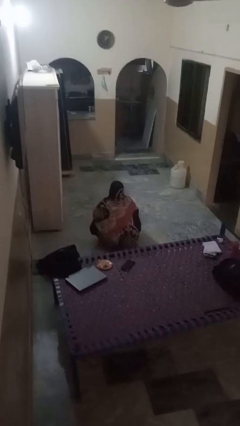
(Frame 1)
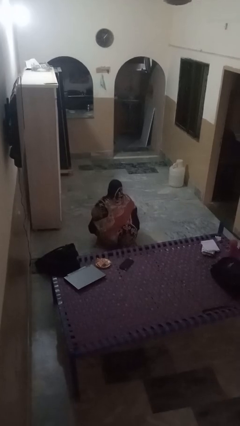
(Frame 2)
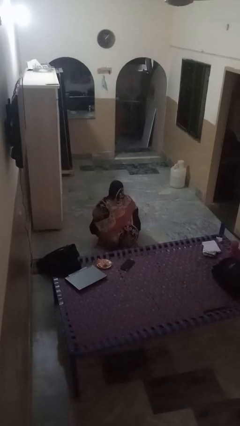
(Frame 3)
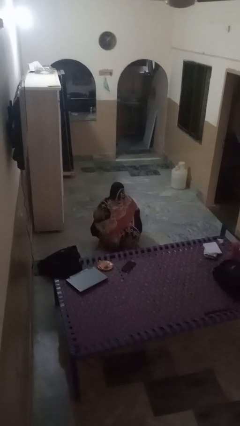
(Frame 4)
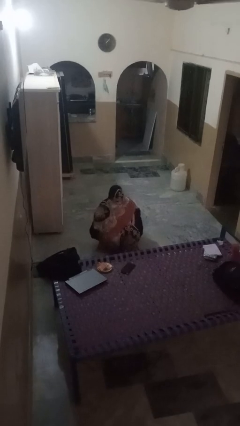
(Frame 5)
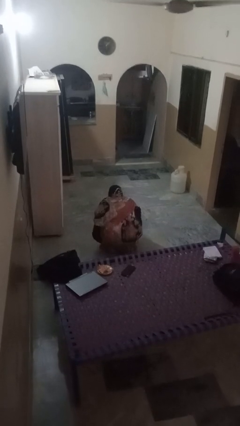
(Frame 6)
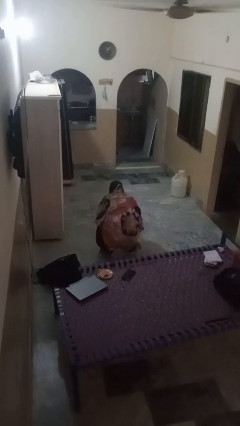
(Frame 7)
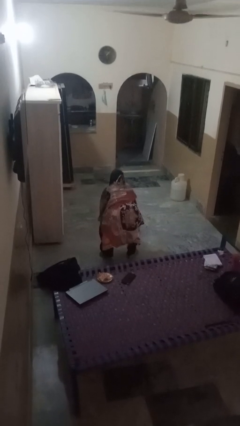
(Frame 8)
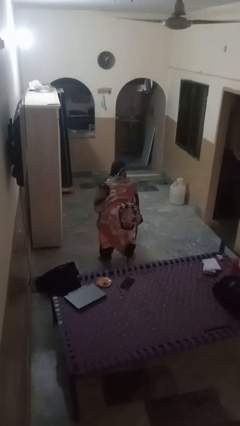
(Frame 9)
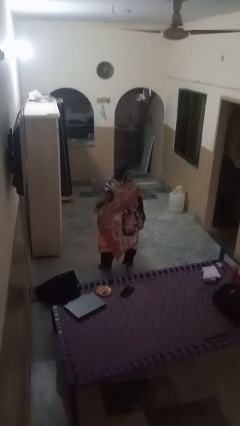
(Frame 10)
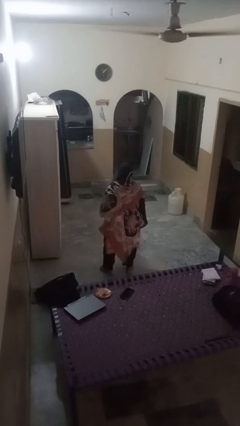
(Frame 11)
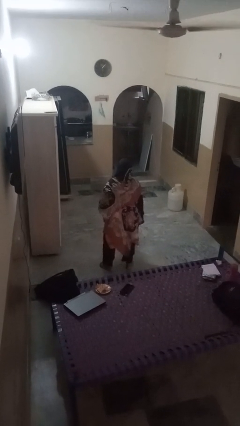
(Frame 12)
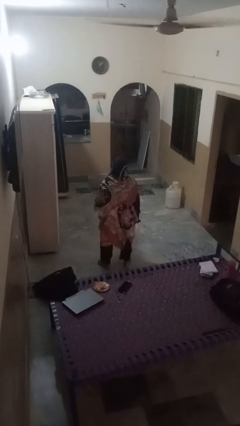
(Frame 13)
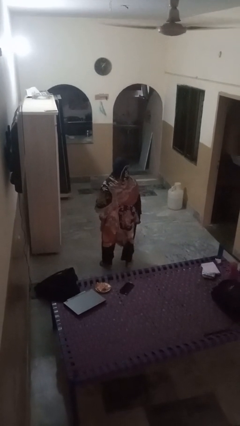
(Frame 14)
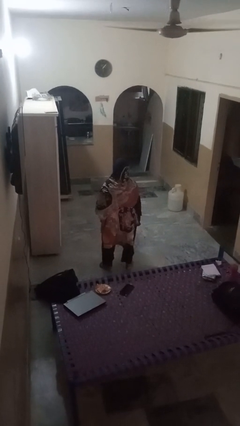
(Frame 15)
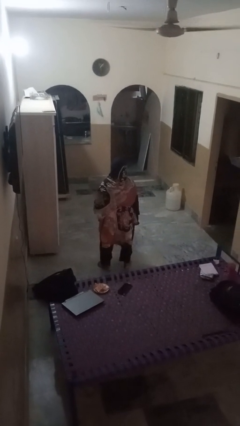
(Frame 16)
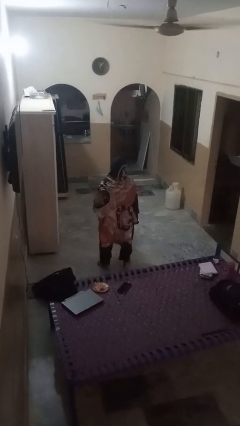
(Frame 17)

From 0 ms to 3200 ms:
person stands up

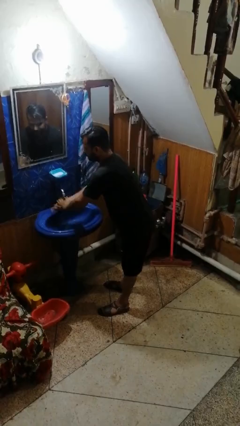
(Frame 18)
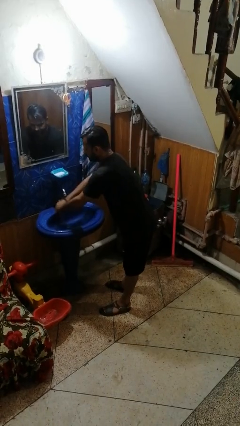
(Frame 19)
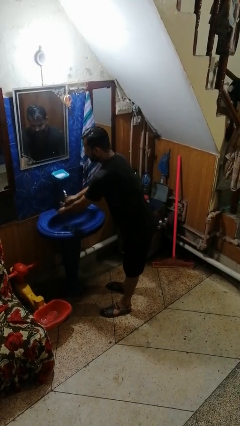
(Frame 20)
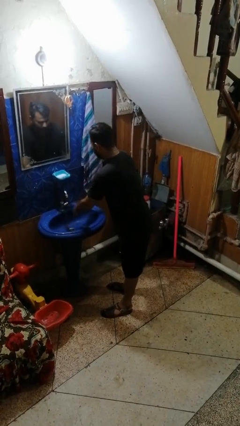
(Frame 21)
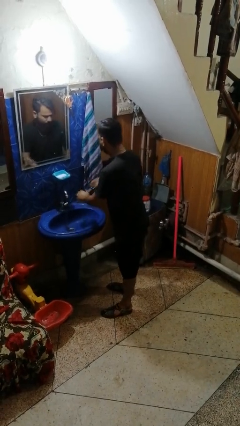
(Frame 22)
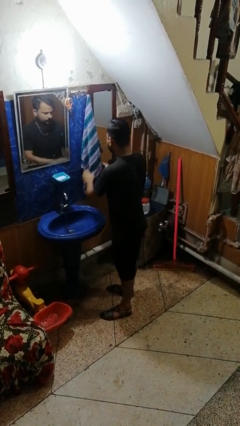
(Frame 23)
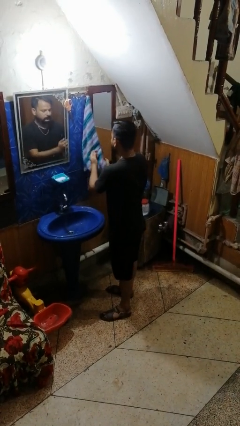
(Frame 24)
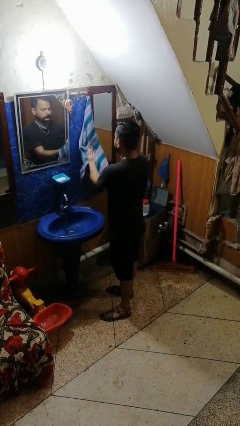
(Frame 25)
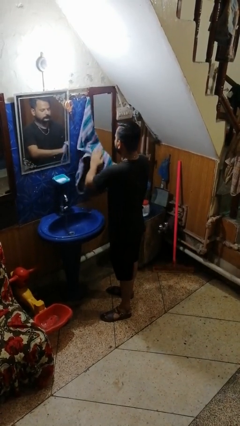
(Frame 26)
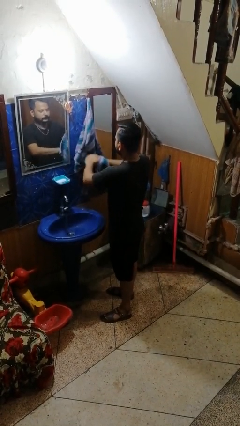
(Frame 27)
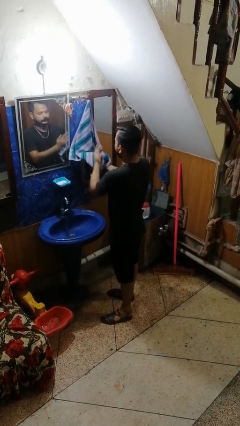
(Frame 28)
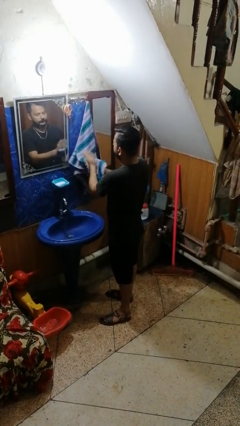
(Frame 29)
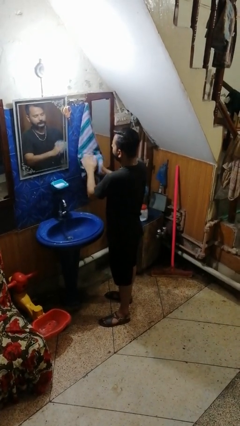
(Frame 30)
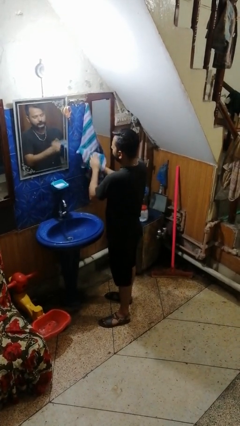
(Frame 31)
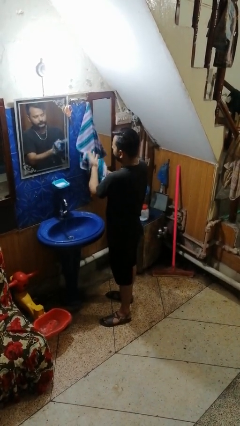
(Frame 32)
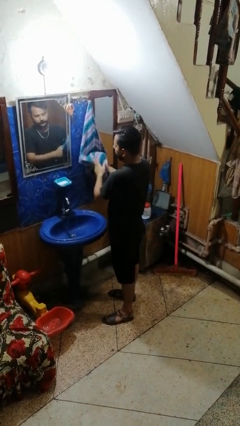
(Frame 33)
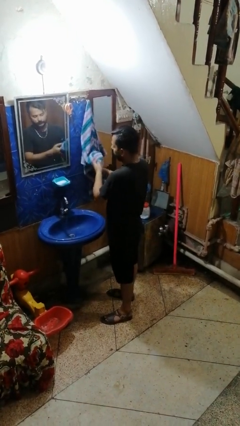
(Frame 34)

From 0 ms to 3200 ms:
person dries hands with towel

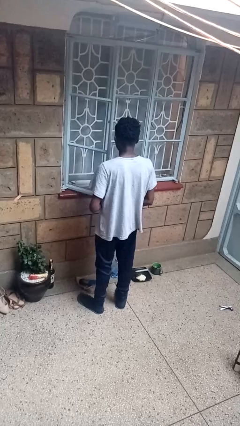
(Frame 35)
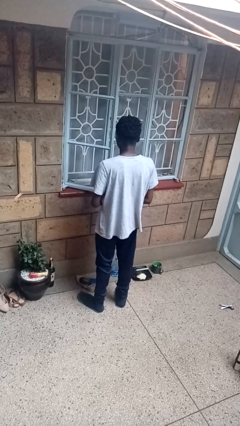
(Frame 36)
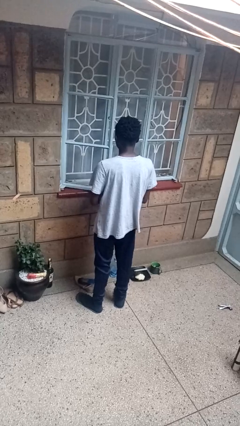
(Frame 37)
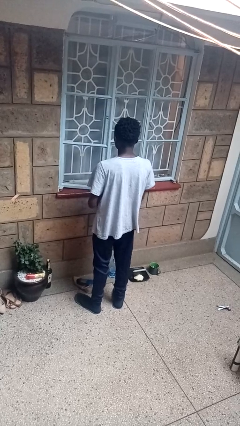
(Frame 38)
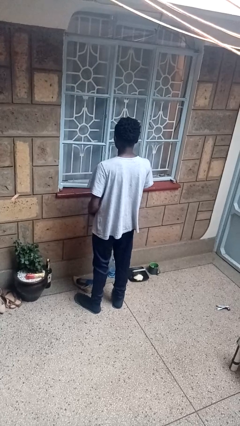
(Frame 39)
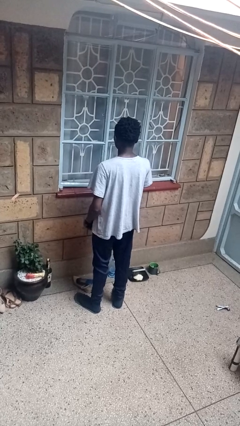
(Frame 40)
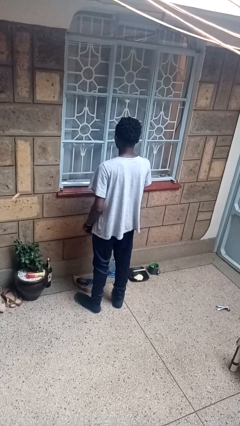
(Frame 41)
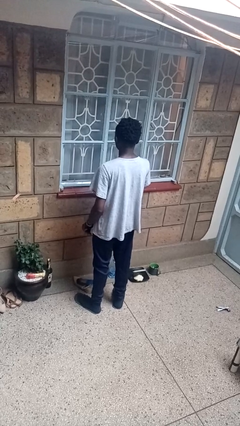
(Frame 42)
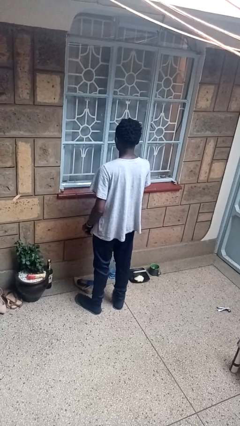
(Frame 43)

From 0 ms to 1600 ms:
person closes home window

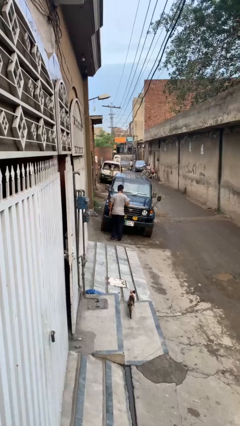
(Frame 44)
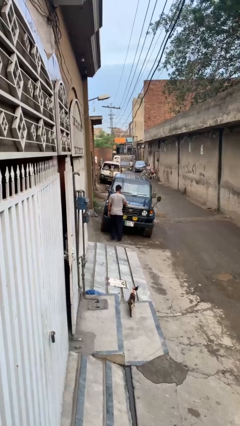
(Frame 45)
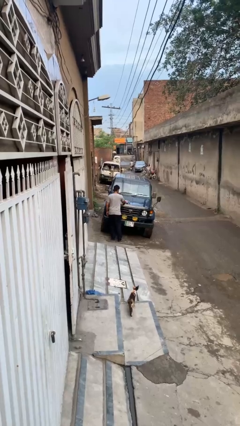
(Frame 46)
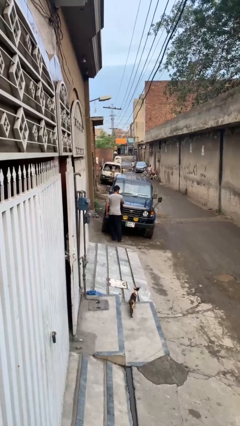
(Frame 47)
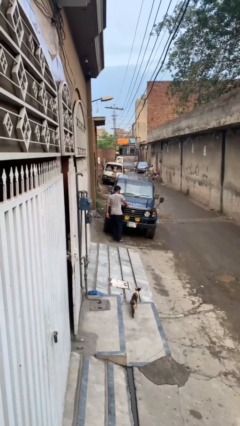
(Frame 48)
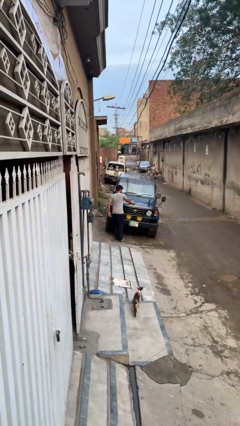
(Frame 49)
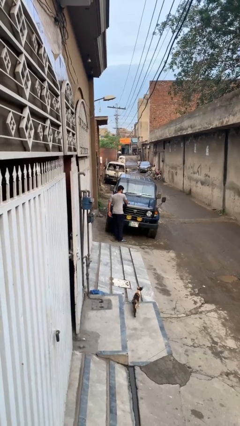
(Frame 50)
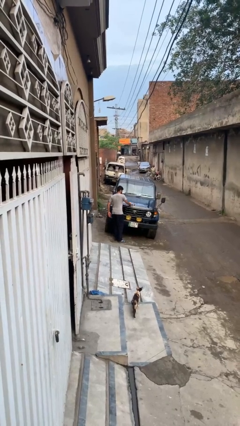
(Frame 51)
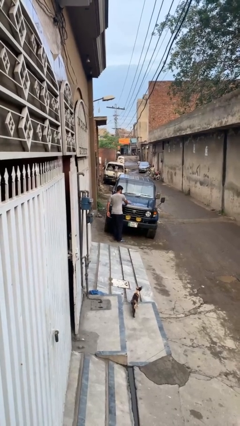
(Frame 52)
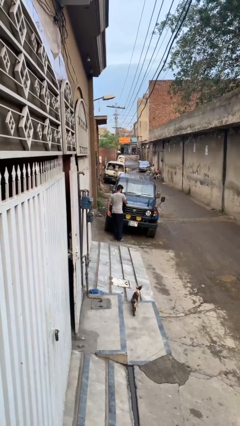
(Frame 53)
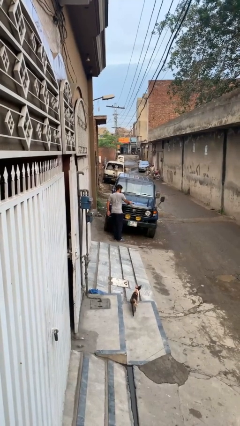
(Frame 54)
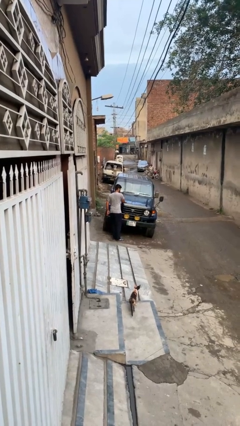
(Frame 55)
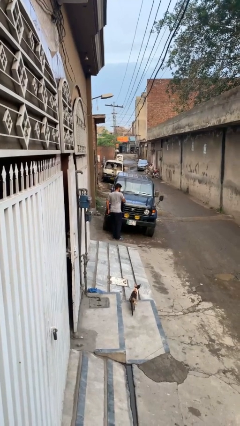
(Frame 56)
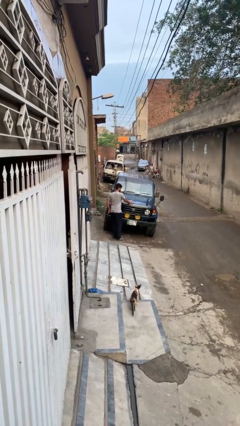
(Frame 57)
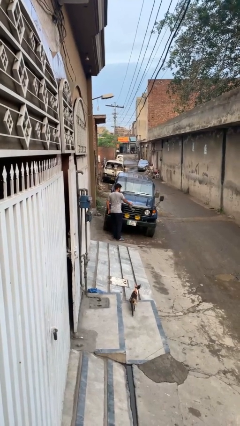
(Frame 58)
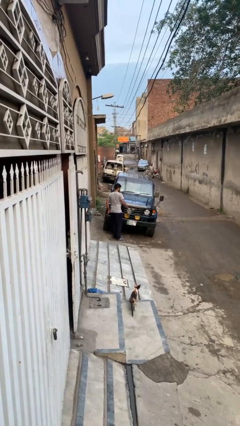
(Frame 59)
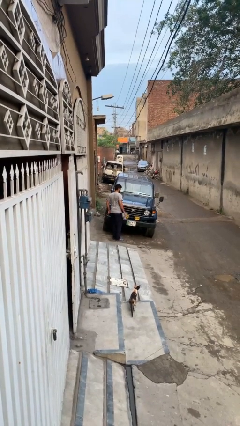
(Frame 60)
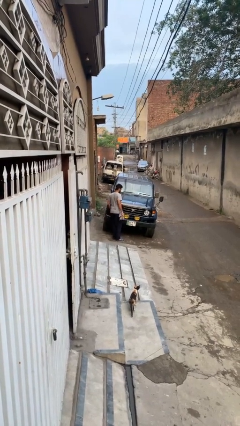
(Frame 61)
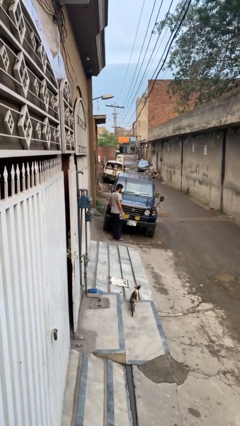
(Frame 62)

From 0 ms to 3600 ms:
person polishes car with rag

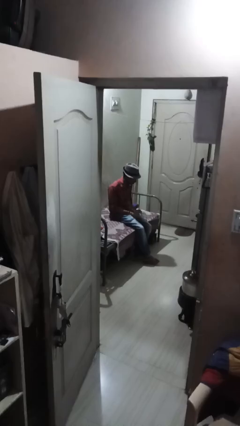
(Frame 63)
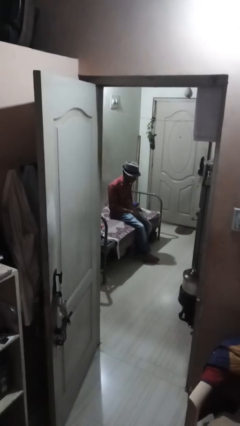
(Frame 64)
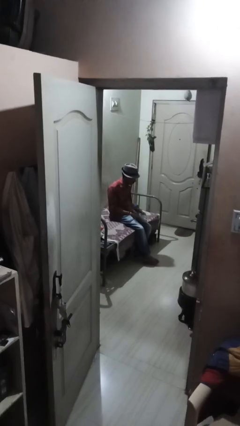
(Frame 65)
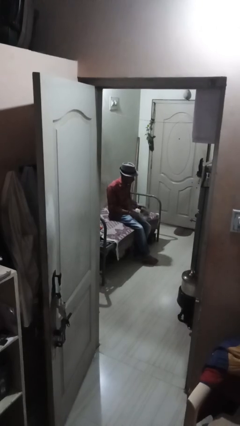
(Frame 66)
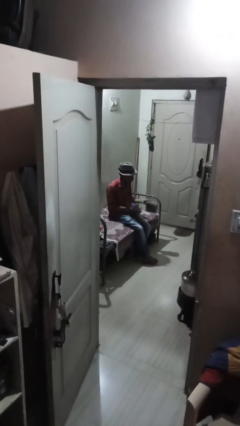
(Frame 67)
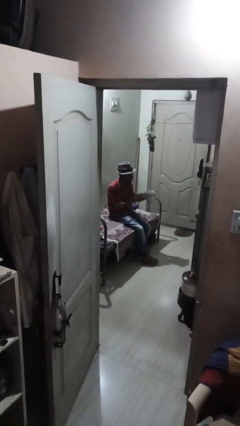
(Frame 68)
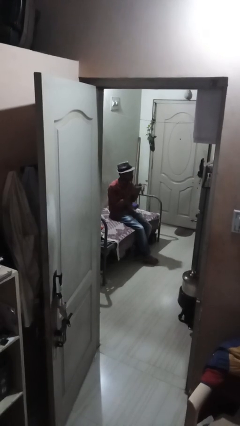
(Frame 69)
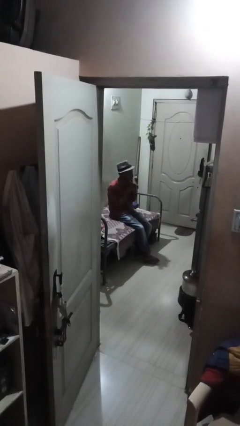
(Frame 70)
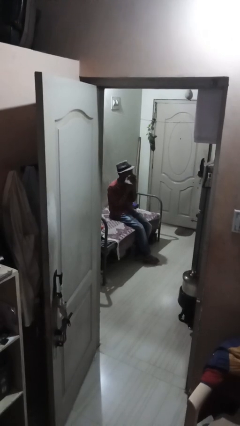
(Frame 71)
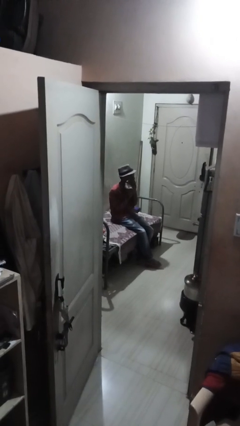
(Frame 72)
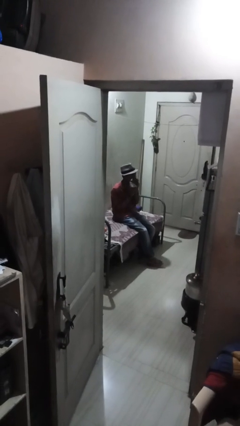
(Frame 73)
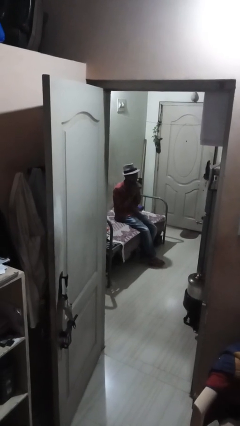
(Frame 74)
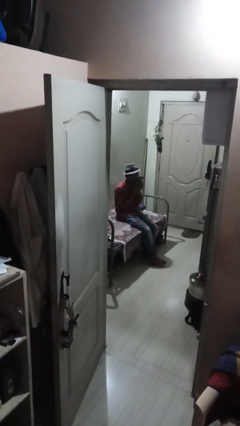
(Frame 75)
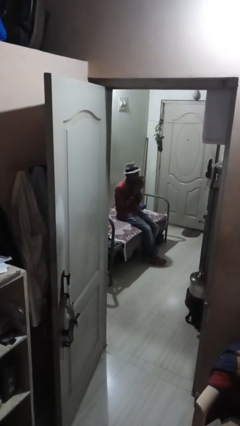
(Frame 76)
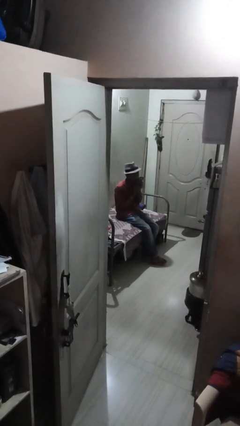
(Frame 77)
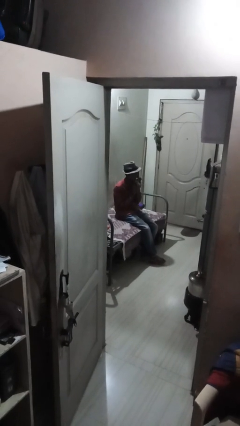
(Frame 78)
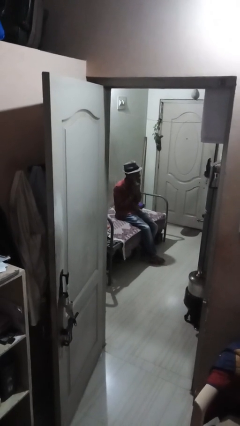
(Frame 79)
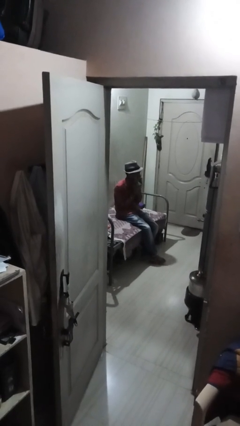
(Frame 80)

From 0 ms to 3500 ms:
person wipes mouth with napkin

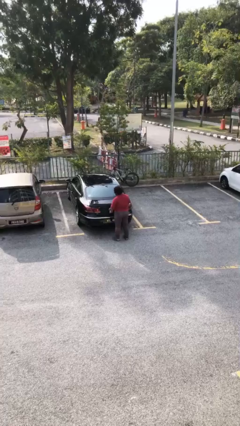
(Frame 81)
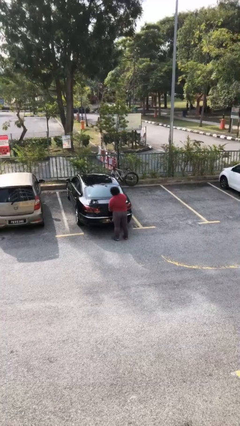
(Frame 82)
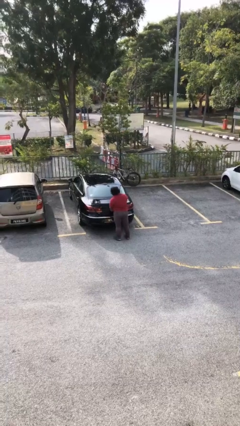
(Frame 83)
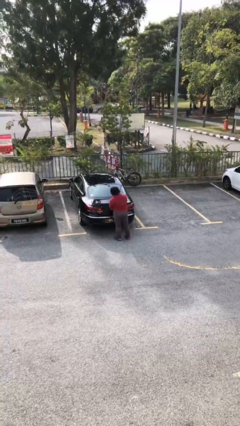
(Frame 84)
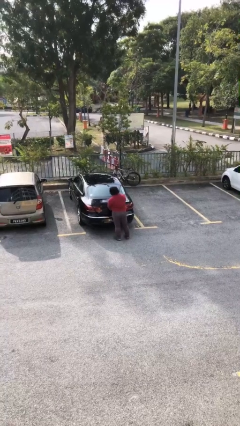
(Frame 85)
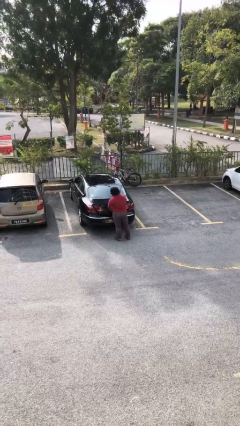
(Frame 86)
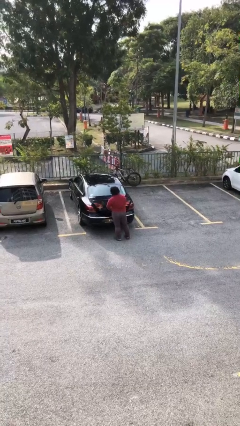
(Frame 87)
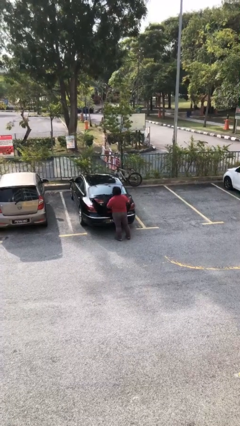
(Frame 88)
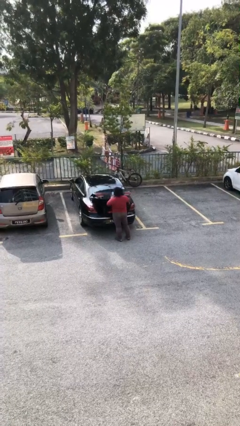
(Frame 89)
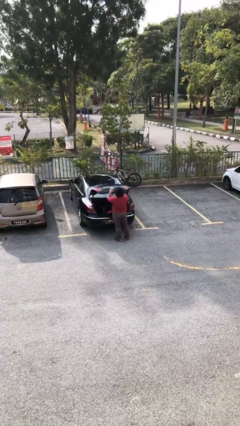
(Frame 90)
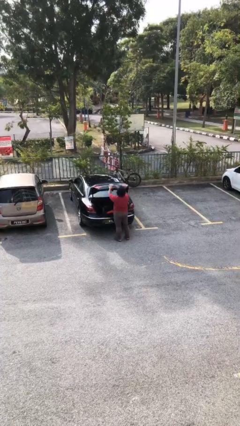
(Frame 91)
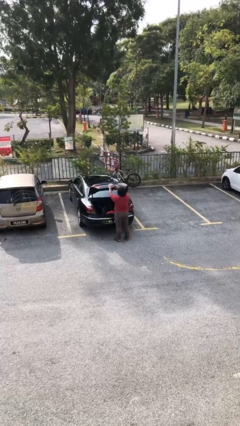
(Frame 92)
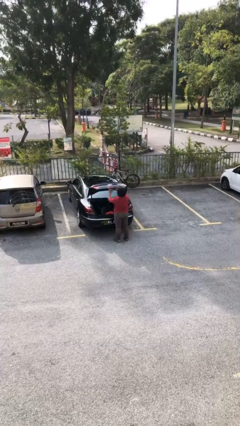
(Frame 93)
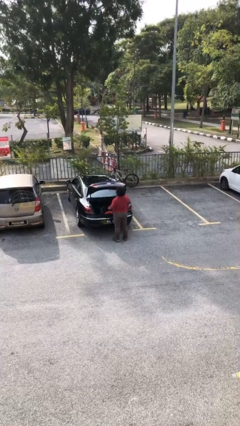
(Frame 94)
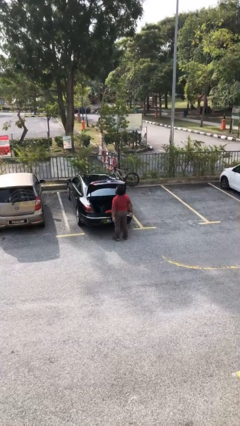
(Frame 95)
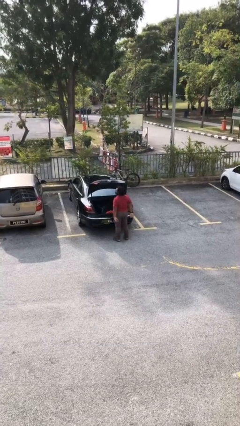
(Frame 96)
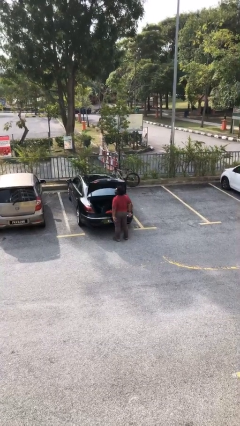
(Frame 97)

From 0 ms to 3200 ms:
person opens car trunk
